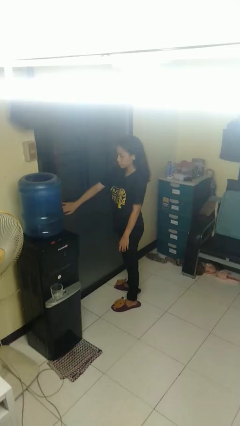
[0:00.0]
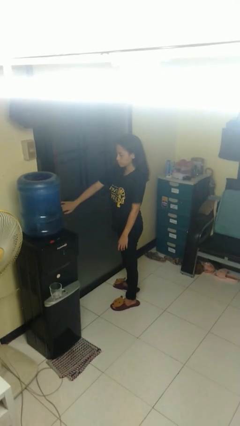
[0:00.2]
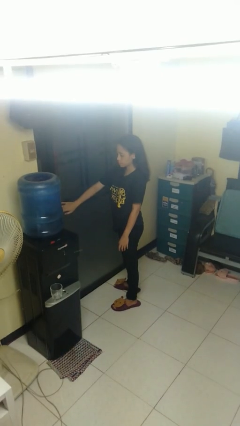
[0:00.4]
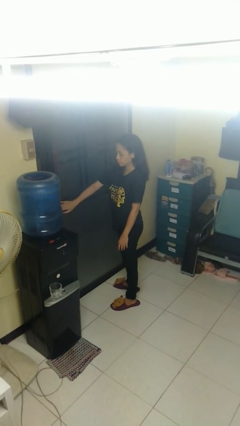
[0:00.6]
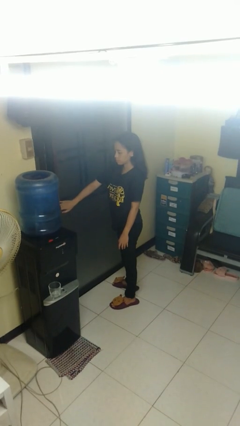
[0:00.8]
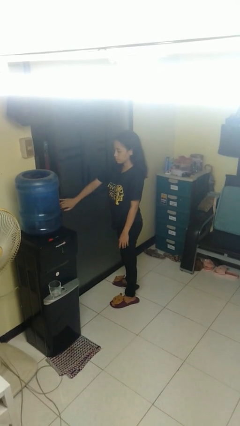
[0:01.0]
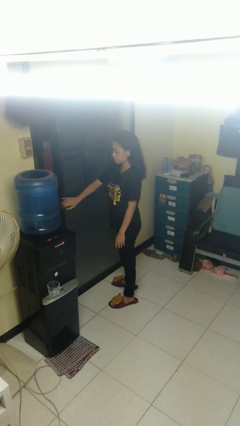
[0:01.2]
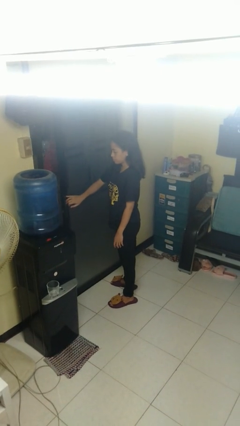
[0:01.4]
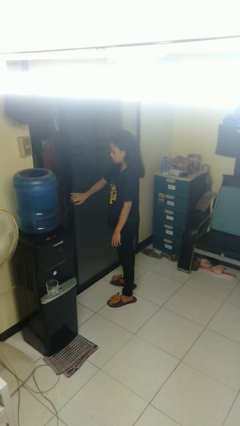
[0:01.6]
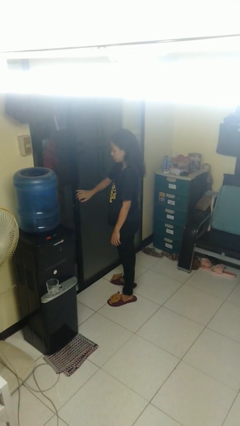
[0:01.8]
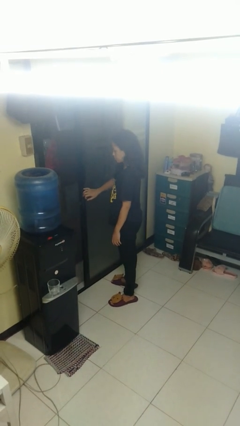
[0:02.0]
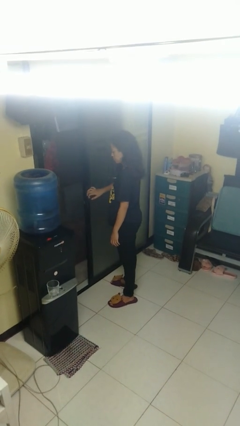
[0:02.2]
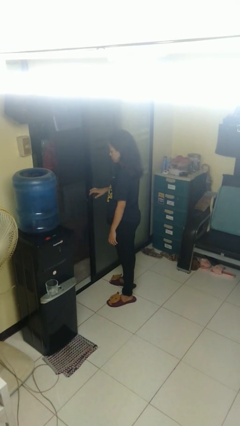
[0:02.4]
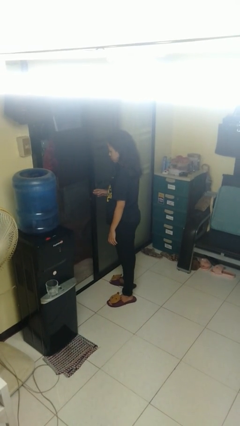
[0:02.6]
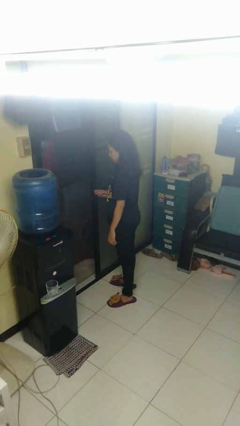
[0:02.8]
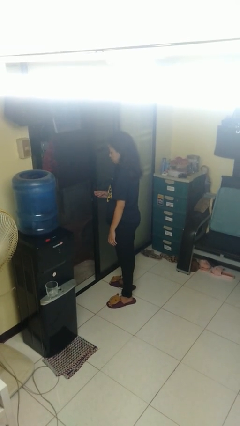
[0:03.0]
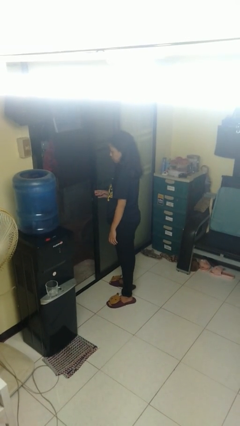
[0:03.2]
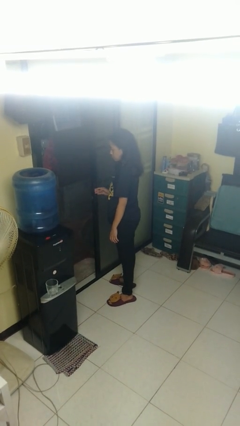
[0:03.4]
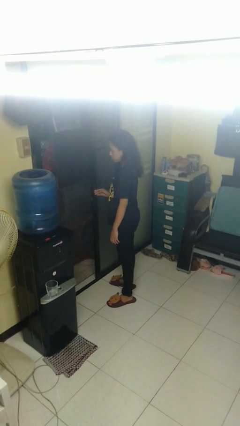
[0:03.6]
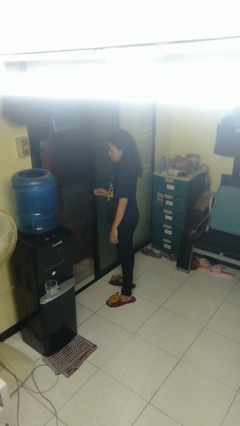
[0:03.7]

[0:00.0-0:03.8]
person opens sliding door

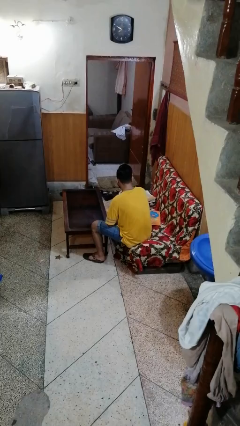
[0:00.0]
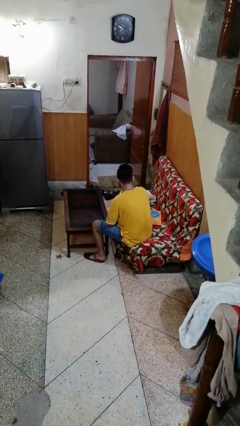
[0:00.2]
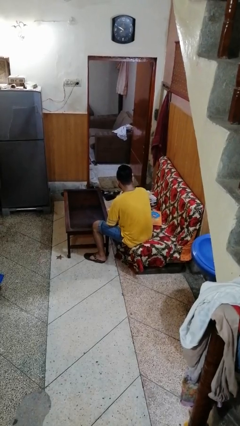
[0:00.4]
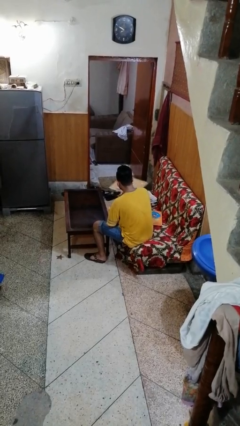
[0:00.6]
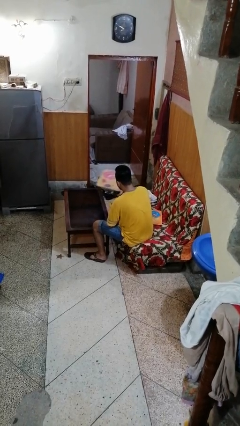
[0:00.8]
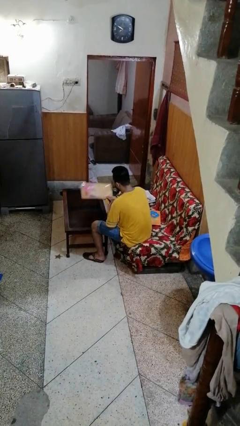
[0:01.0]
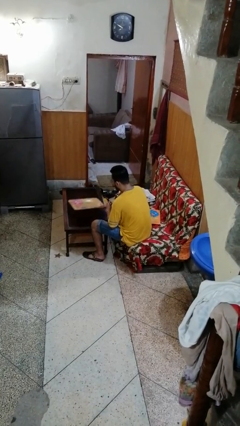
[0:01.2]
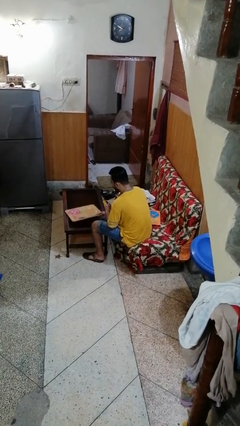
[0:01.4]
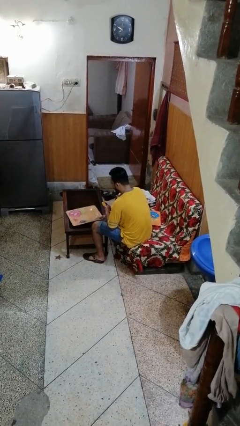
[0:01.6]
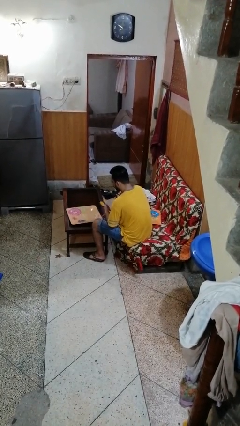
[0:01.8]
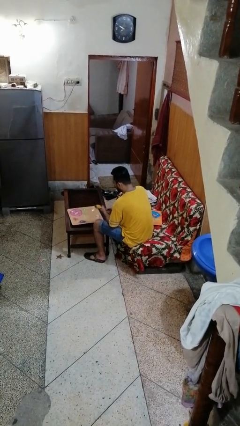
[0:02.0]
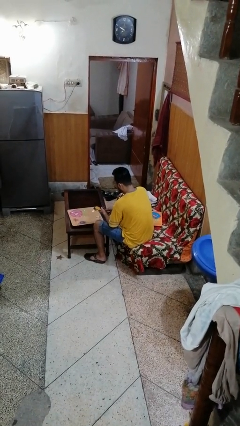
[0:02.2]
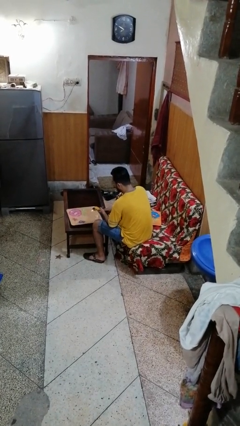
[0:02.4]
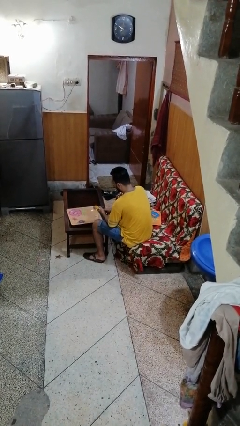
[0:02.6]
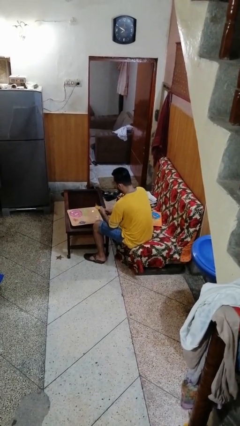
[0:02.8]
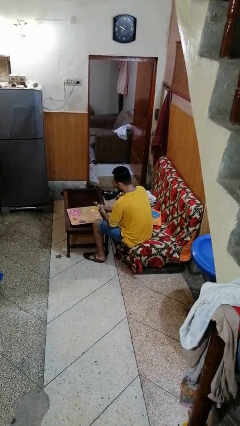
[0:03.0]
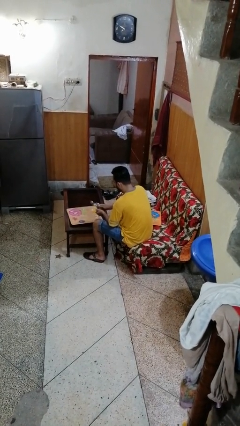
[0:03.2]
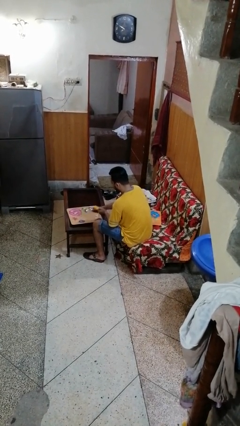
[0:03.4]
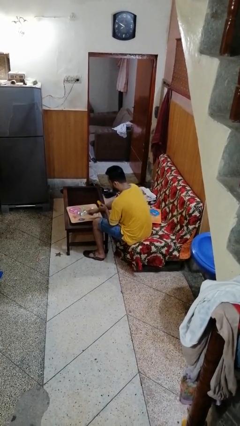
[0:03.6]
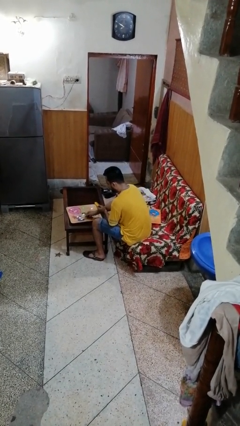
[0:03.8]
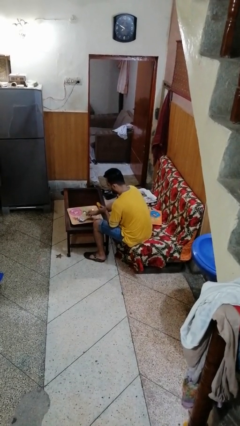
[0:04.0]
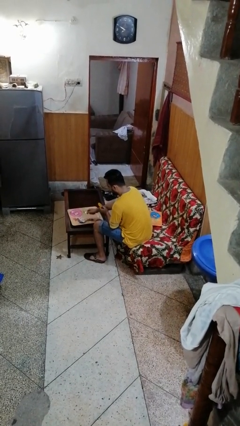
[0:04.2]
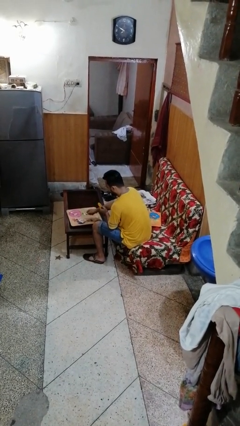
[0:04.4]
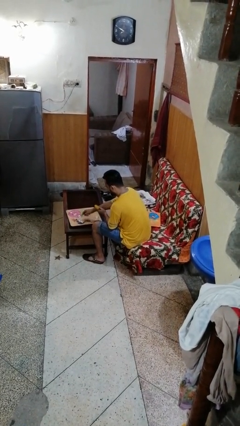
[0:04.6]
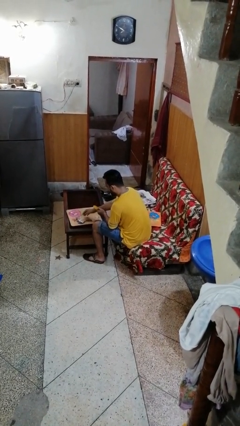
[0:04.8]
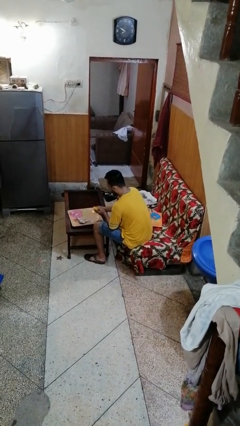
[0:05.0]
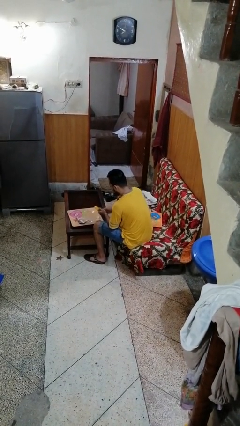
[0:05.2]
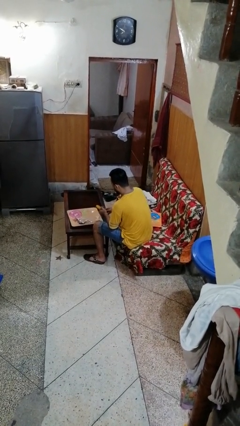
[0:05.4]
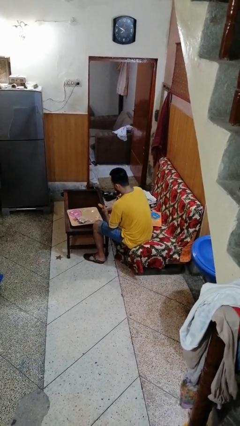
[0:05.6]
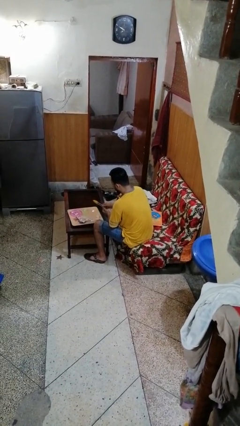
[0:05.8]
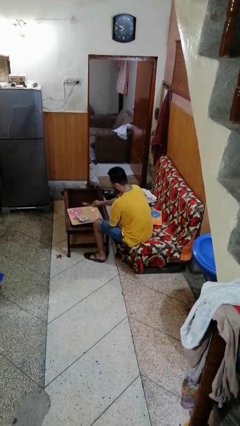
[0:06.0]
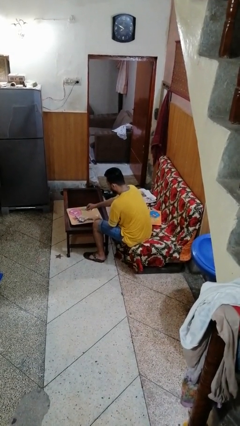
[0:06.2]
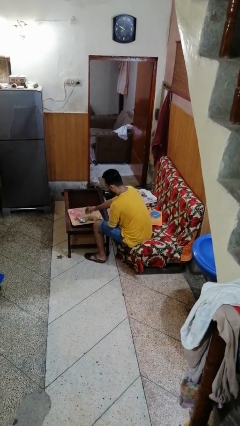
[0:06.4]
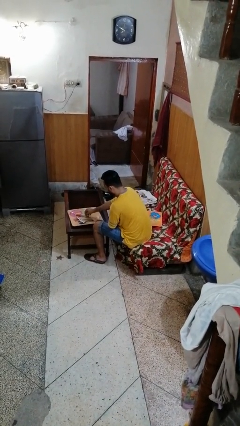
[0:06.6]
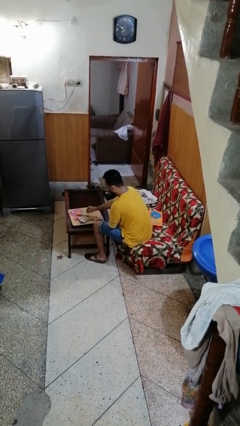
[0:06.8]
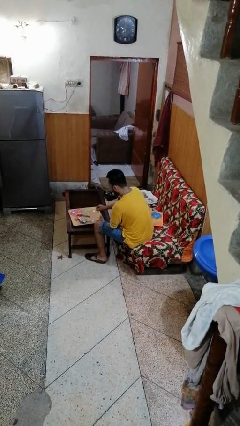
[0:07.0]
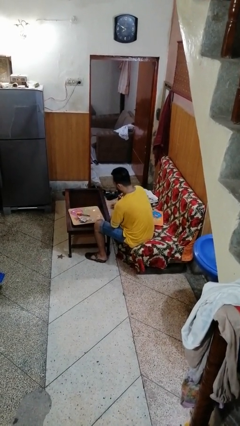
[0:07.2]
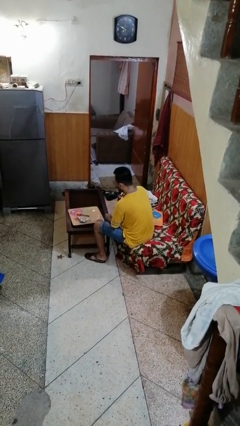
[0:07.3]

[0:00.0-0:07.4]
person sets table

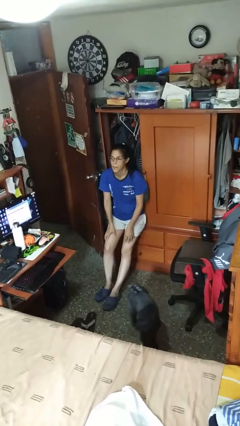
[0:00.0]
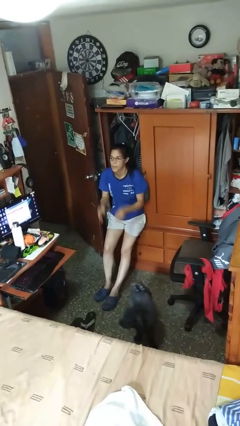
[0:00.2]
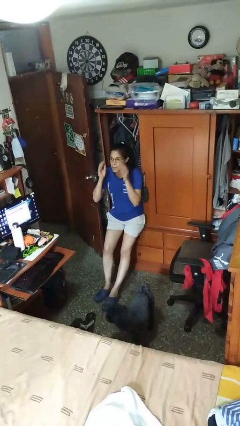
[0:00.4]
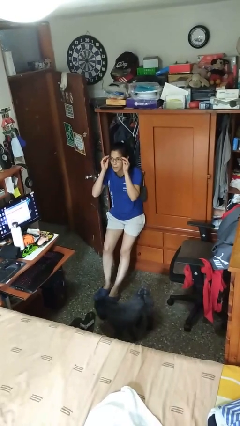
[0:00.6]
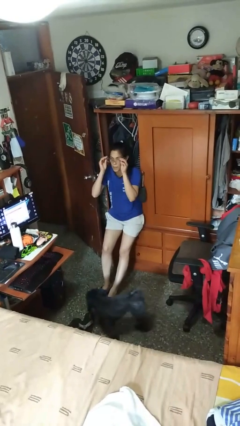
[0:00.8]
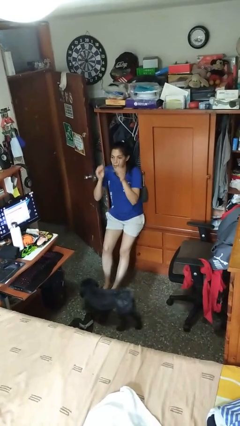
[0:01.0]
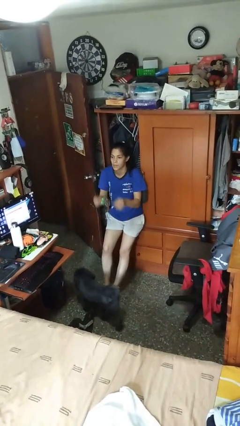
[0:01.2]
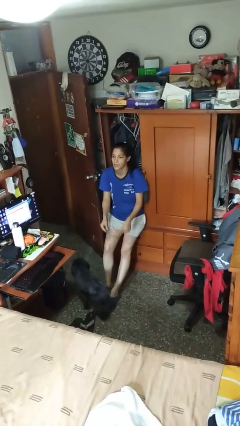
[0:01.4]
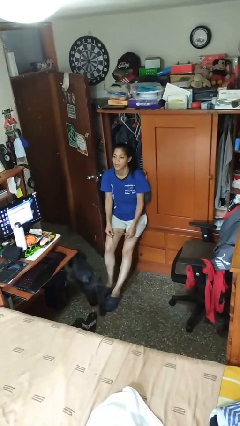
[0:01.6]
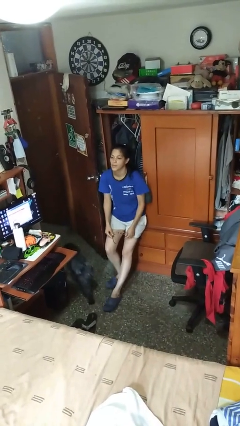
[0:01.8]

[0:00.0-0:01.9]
person takes off glasses

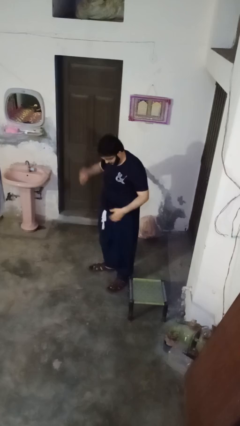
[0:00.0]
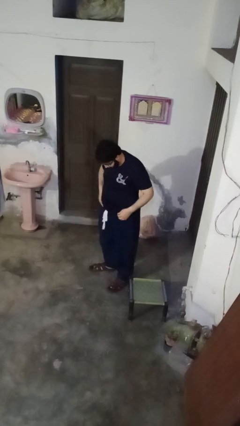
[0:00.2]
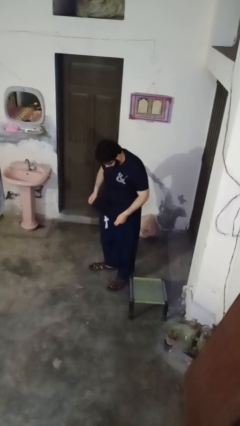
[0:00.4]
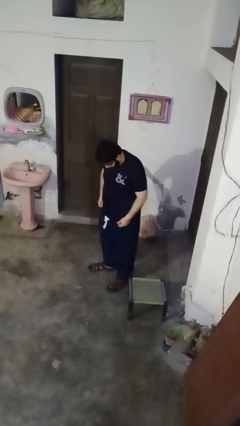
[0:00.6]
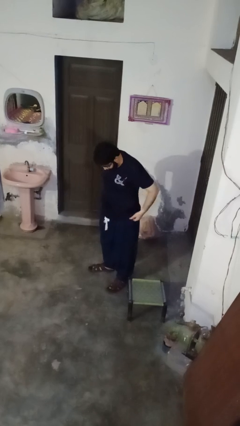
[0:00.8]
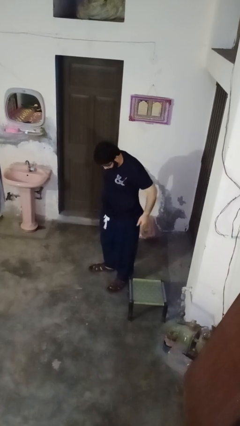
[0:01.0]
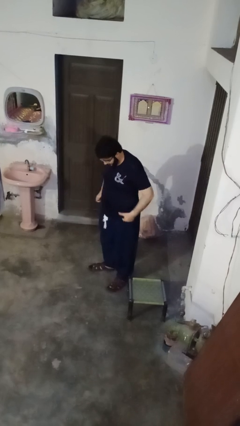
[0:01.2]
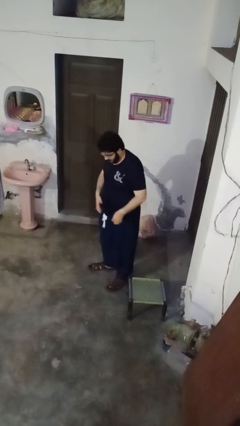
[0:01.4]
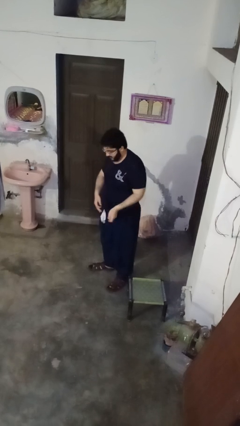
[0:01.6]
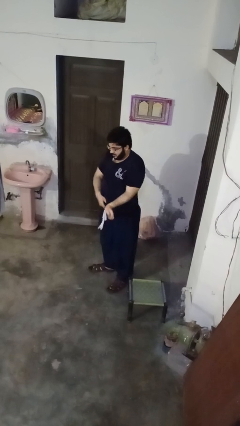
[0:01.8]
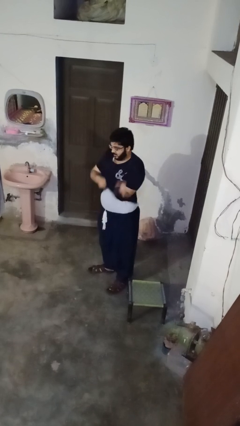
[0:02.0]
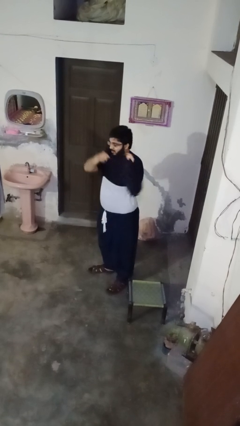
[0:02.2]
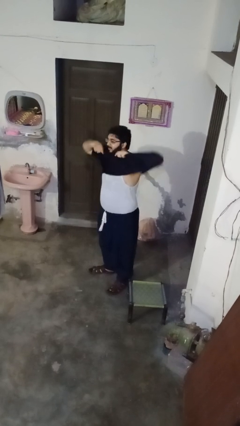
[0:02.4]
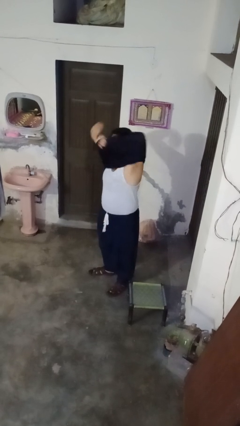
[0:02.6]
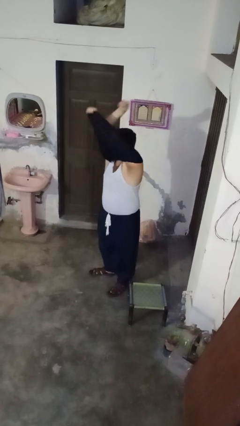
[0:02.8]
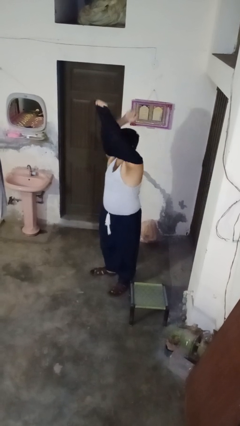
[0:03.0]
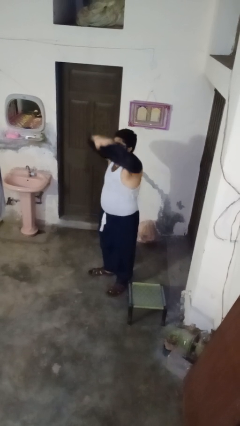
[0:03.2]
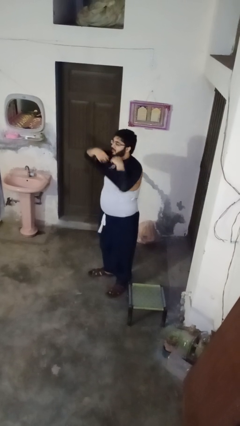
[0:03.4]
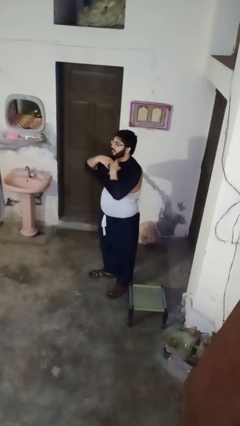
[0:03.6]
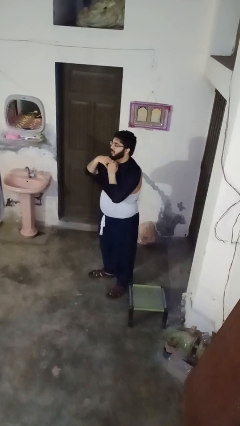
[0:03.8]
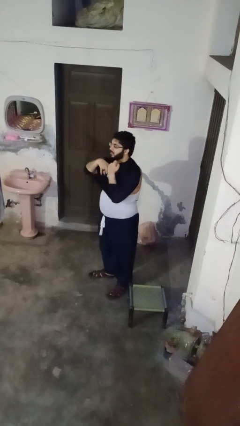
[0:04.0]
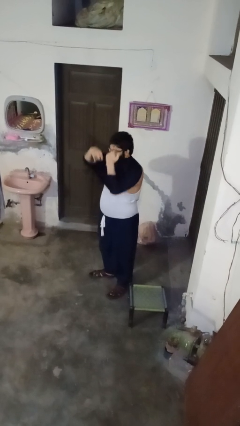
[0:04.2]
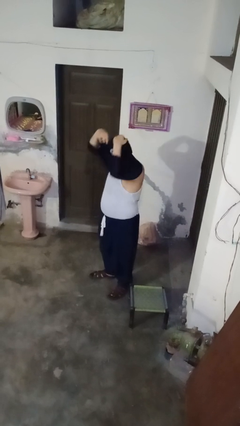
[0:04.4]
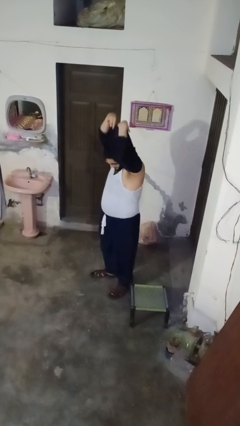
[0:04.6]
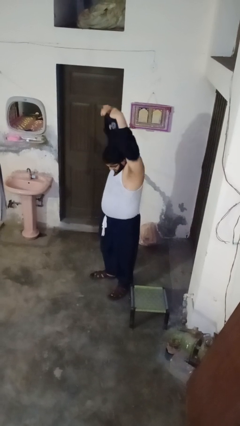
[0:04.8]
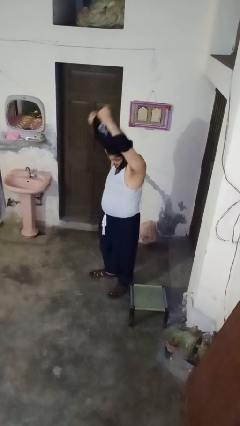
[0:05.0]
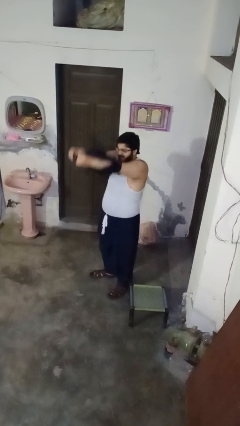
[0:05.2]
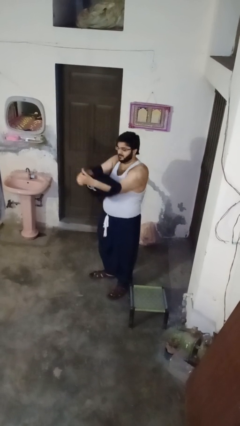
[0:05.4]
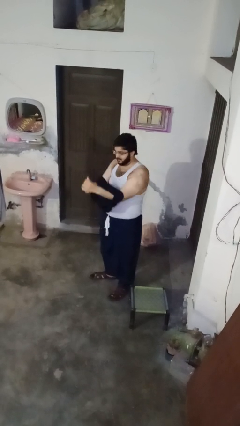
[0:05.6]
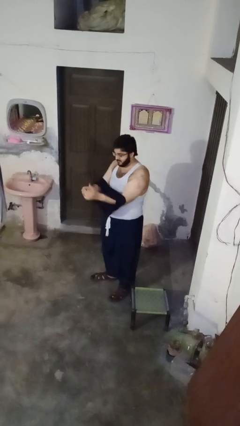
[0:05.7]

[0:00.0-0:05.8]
person takes off shirt
